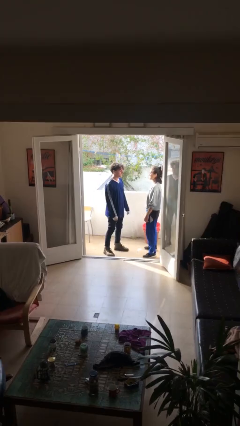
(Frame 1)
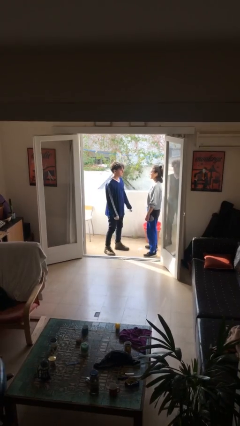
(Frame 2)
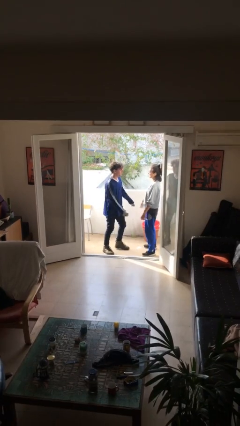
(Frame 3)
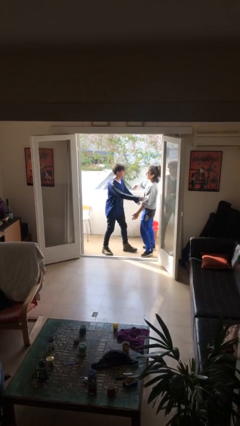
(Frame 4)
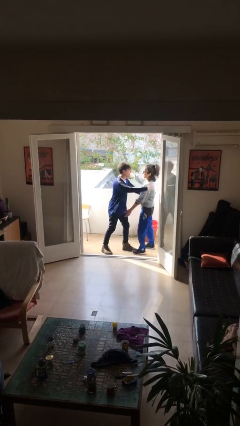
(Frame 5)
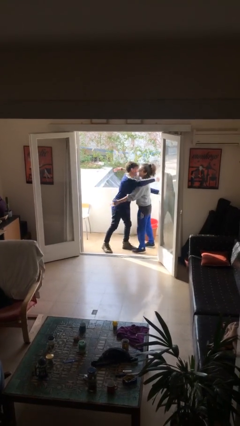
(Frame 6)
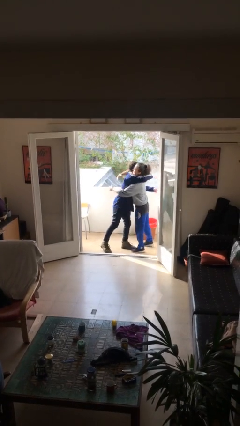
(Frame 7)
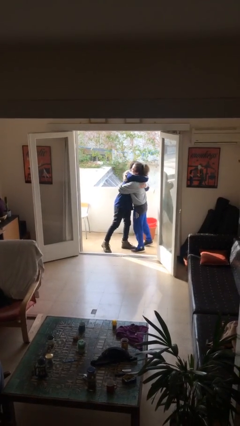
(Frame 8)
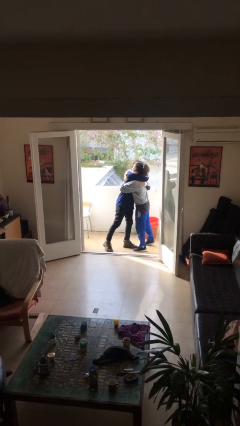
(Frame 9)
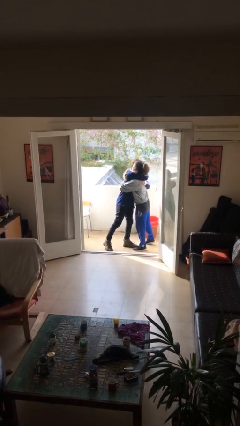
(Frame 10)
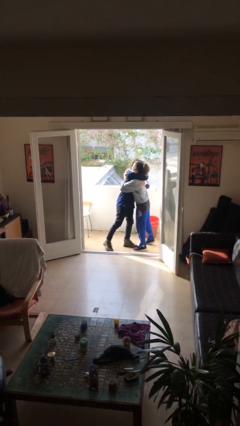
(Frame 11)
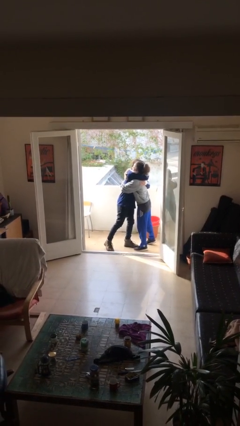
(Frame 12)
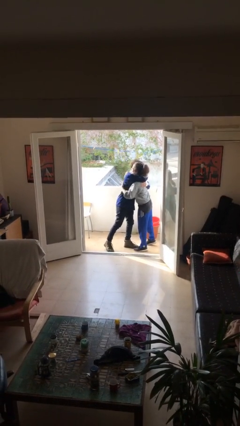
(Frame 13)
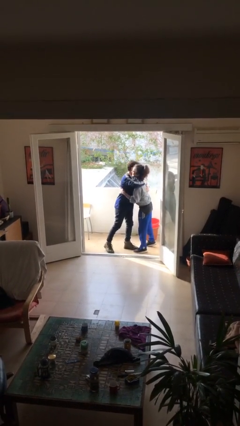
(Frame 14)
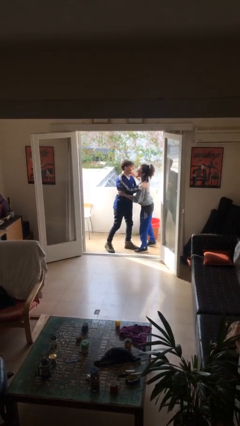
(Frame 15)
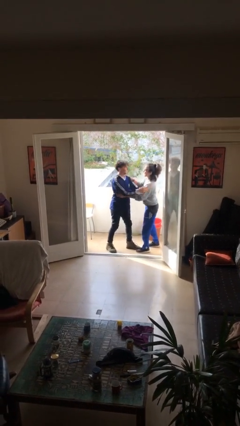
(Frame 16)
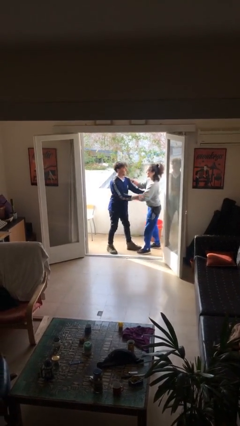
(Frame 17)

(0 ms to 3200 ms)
person embraces person

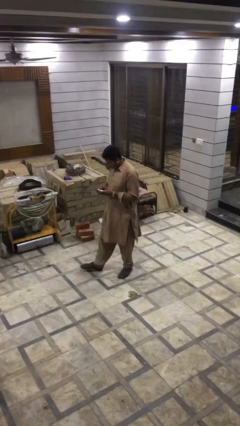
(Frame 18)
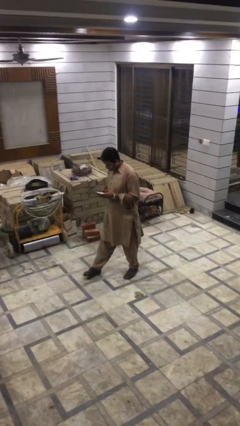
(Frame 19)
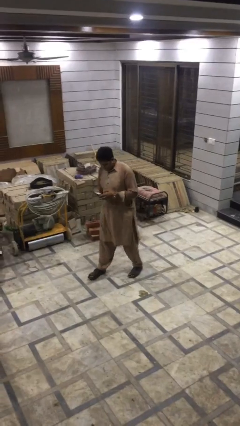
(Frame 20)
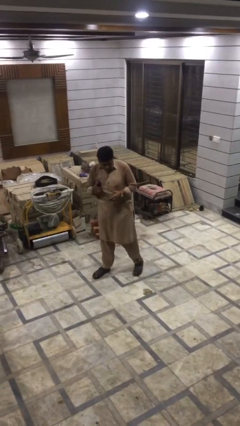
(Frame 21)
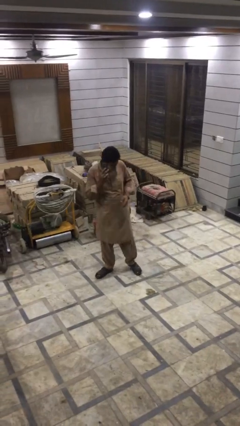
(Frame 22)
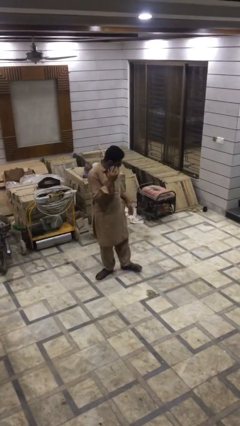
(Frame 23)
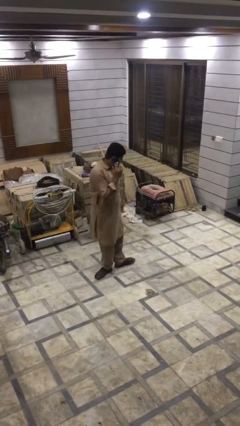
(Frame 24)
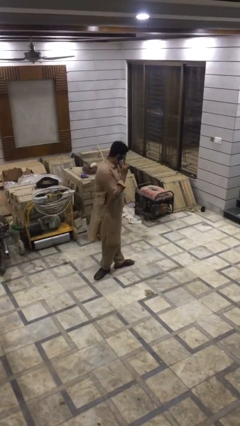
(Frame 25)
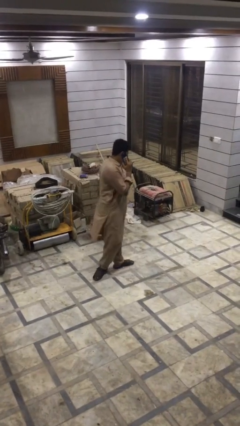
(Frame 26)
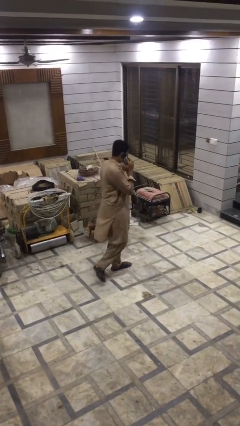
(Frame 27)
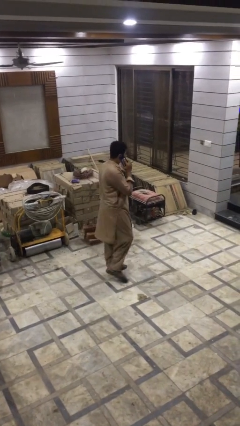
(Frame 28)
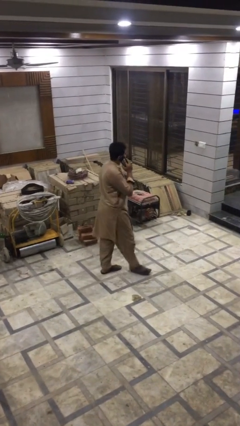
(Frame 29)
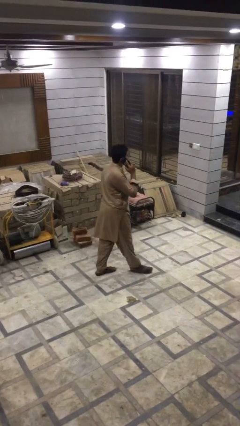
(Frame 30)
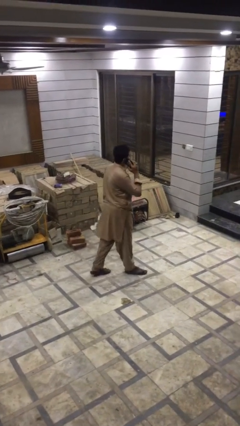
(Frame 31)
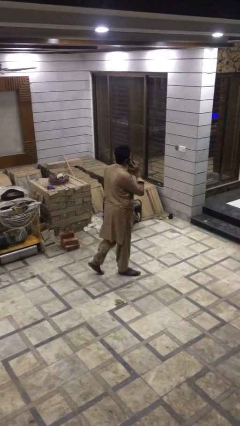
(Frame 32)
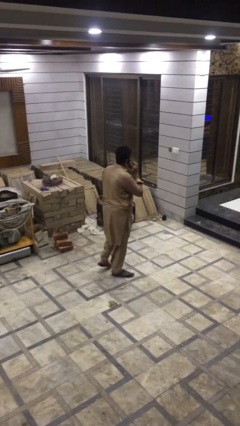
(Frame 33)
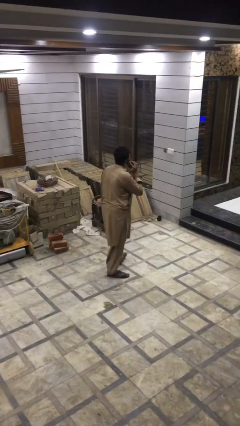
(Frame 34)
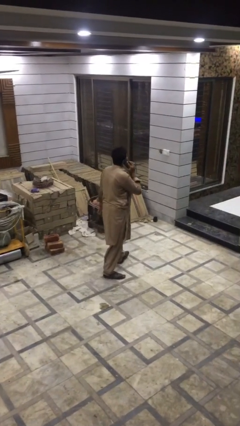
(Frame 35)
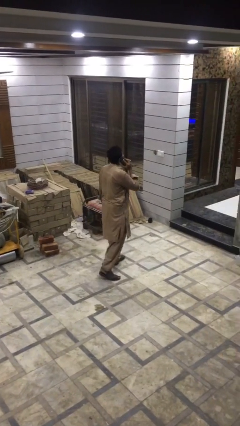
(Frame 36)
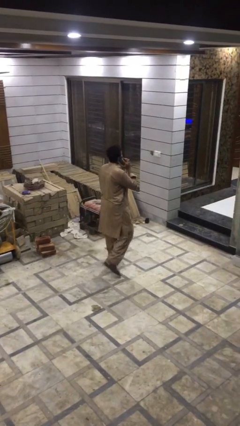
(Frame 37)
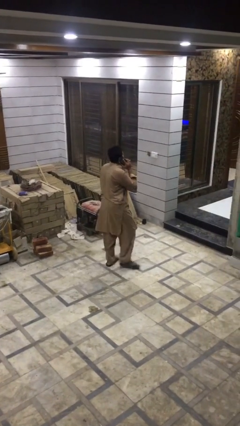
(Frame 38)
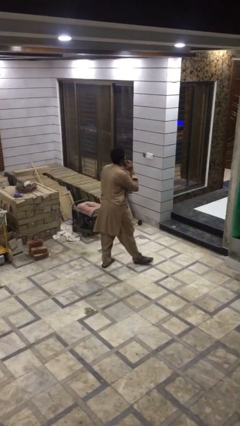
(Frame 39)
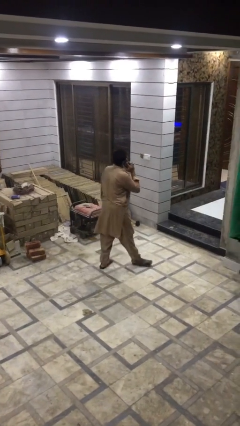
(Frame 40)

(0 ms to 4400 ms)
person talks on phone

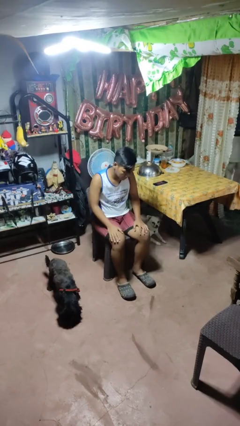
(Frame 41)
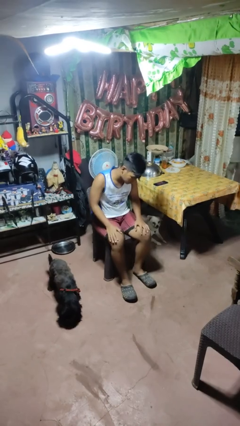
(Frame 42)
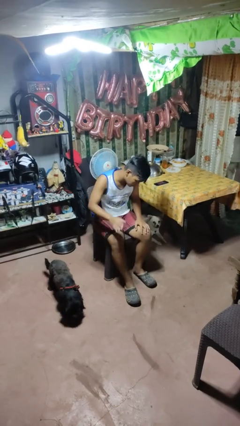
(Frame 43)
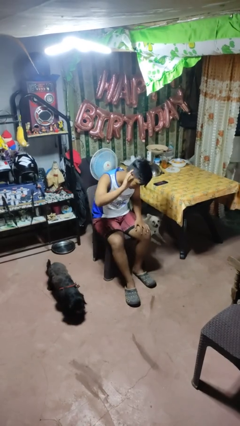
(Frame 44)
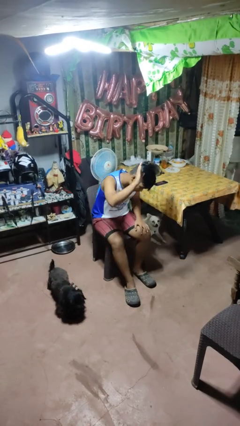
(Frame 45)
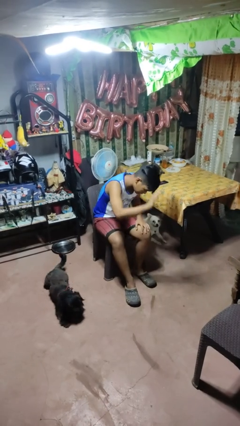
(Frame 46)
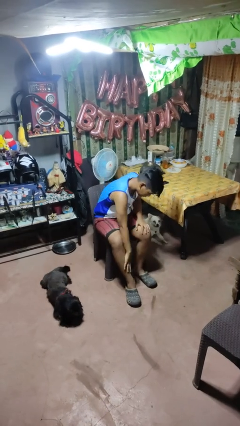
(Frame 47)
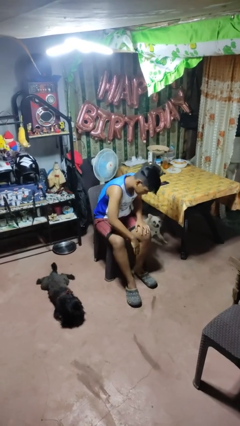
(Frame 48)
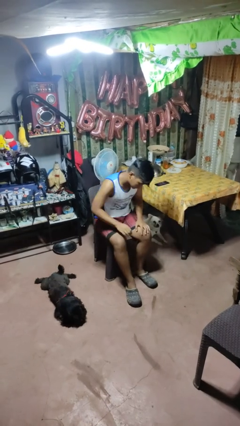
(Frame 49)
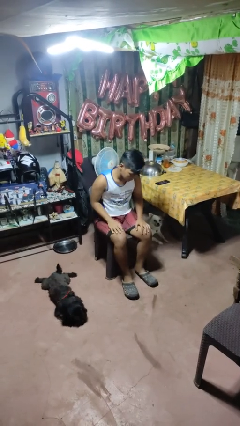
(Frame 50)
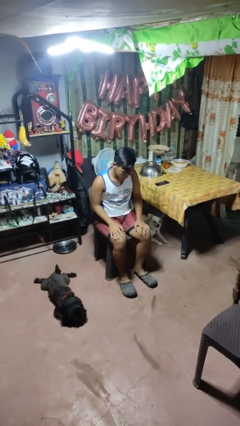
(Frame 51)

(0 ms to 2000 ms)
person swats bug

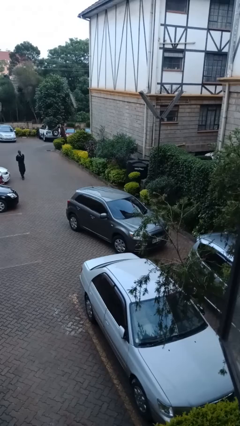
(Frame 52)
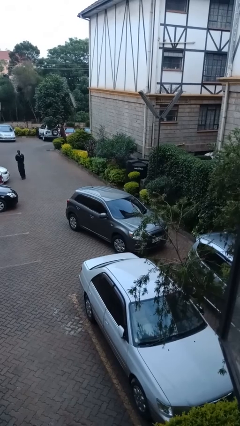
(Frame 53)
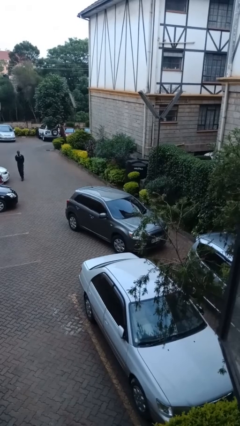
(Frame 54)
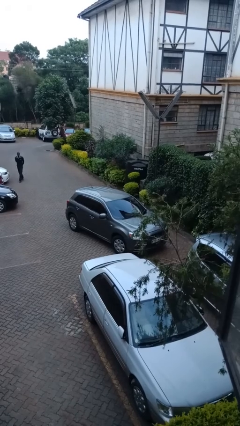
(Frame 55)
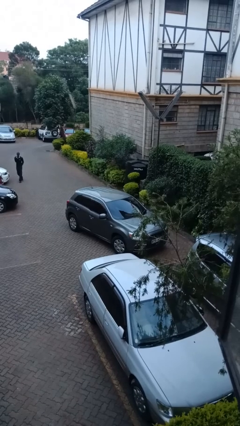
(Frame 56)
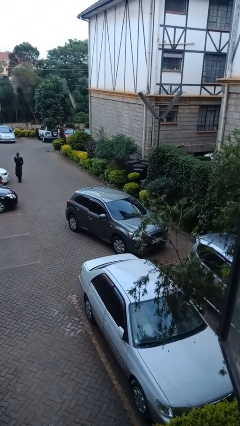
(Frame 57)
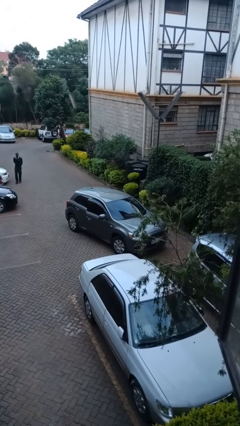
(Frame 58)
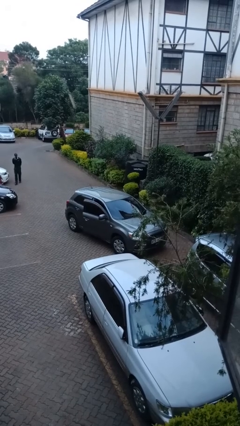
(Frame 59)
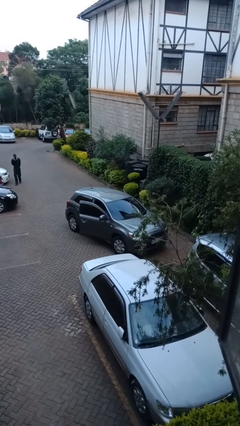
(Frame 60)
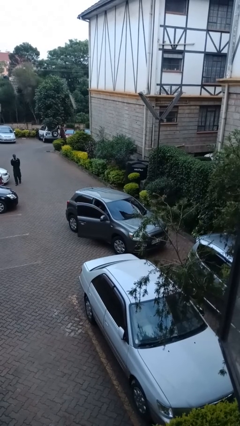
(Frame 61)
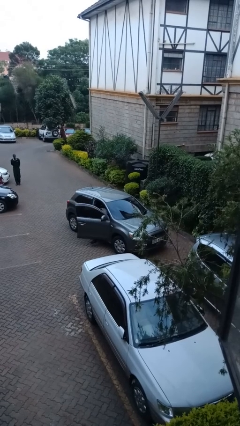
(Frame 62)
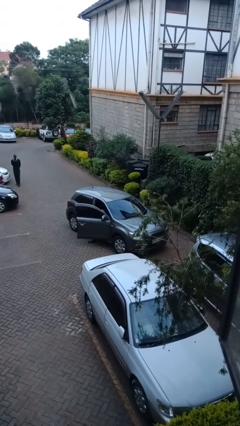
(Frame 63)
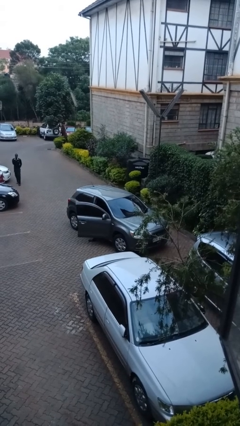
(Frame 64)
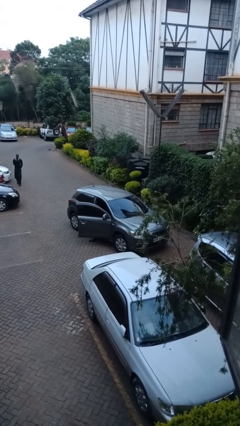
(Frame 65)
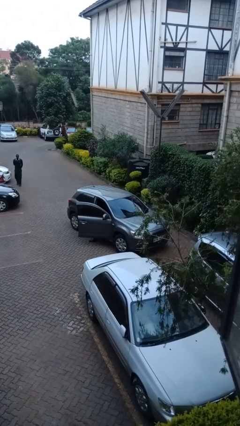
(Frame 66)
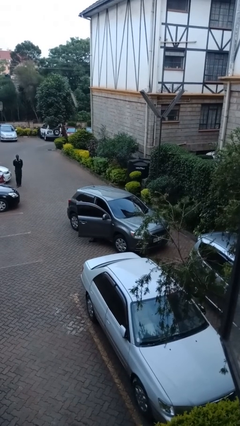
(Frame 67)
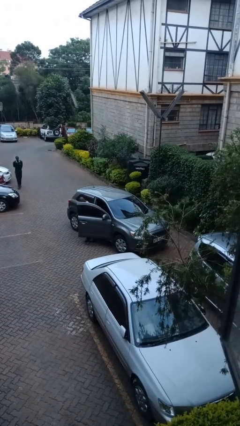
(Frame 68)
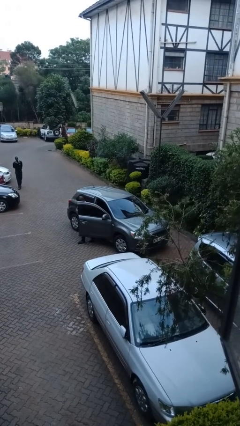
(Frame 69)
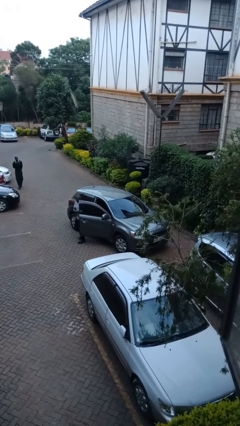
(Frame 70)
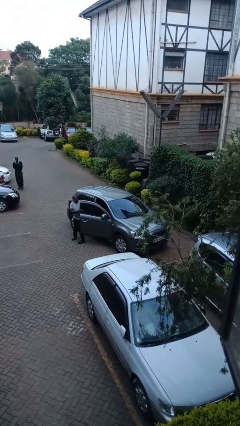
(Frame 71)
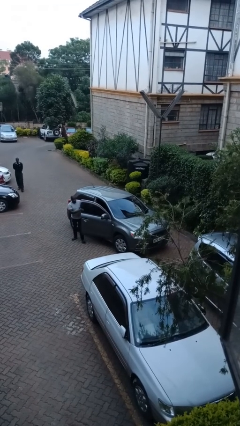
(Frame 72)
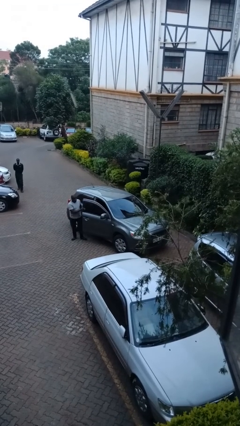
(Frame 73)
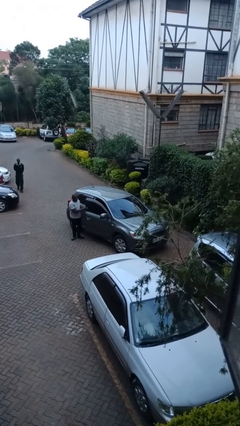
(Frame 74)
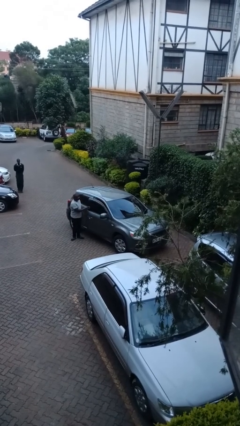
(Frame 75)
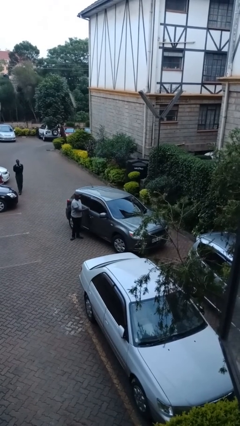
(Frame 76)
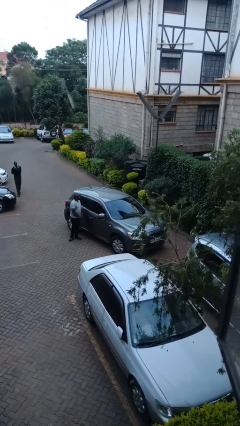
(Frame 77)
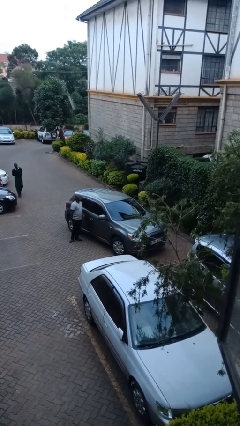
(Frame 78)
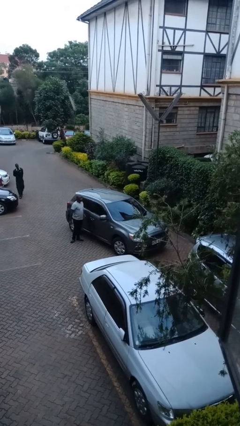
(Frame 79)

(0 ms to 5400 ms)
car drops off person
